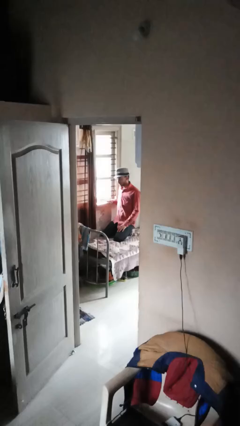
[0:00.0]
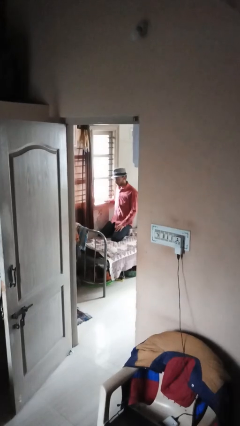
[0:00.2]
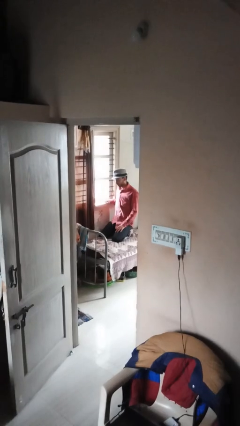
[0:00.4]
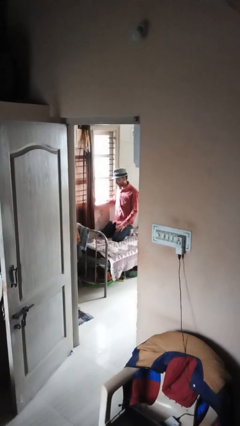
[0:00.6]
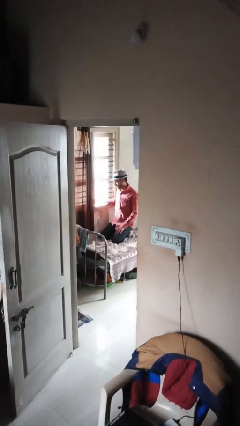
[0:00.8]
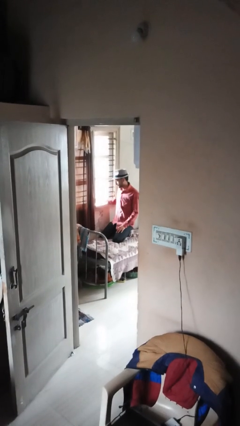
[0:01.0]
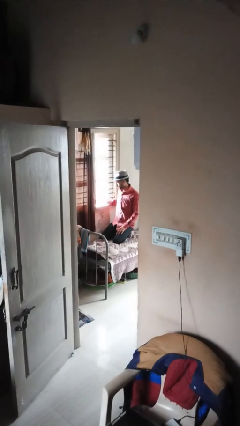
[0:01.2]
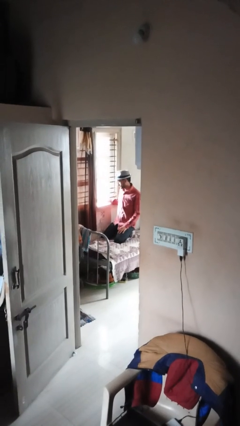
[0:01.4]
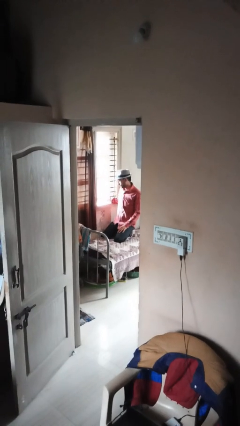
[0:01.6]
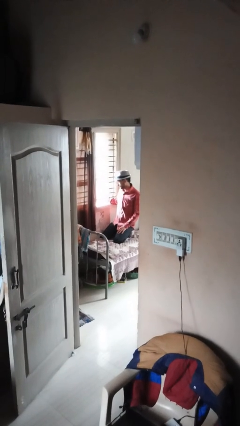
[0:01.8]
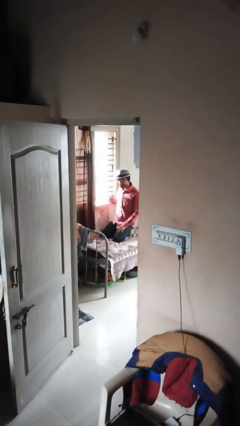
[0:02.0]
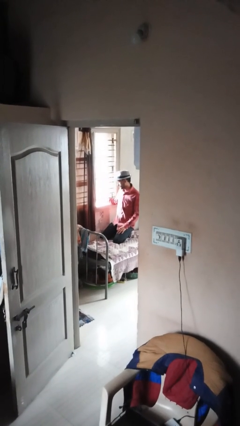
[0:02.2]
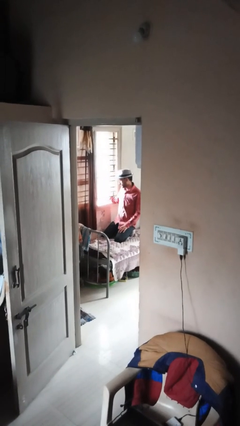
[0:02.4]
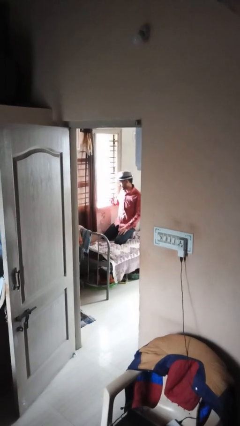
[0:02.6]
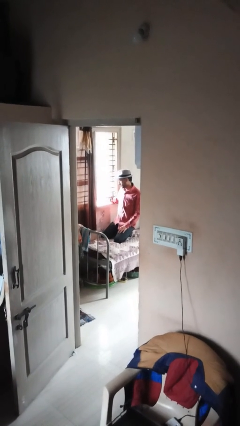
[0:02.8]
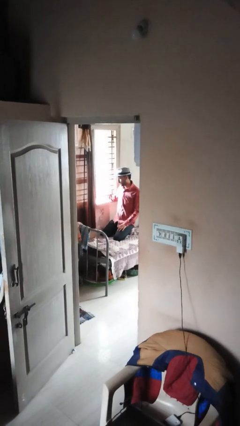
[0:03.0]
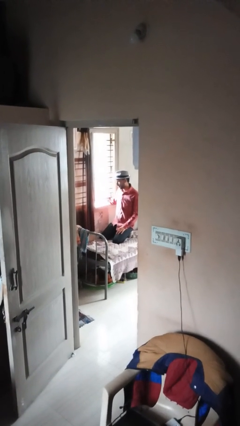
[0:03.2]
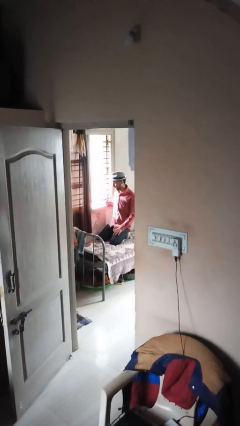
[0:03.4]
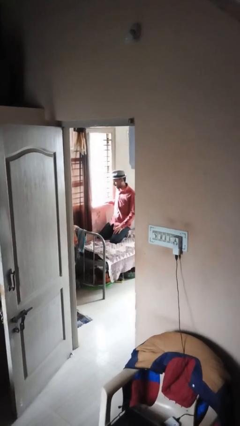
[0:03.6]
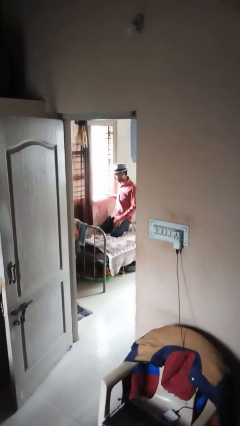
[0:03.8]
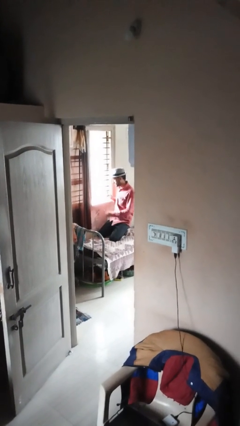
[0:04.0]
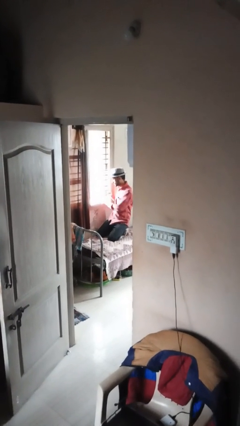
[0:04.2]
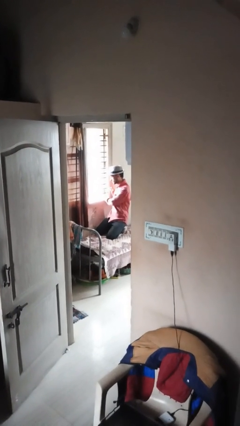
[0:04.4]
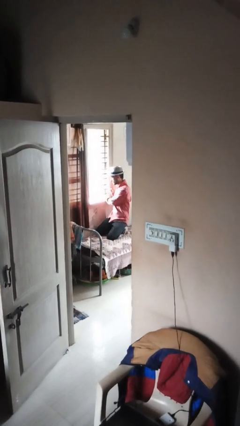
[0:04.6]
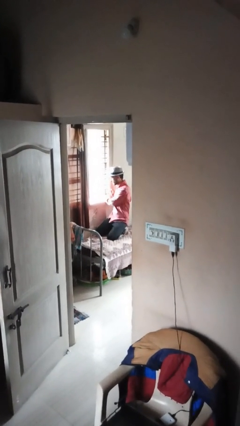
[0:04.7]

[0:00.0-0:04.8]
person opens home window

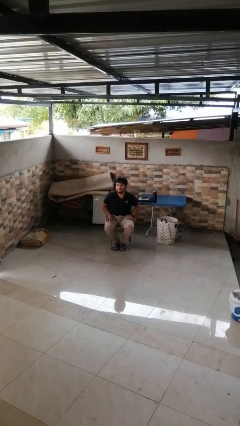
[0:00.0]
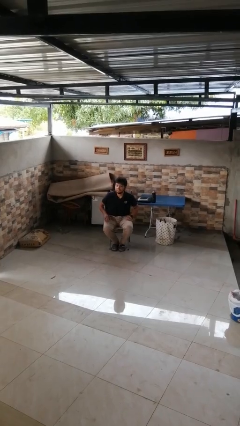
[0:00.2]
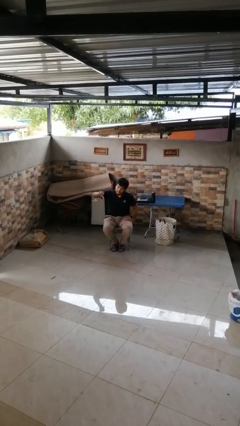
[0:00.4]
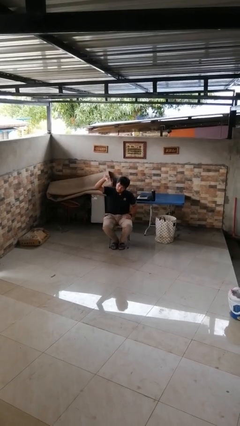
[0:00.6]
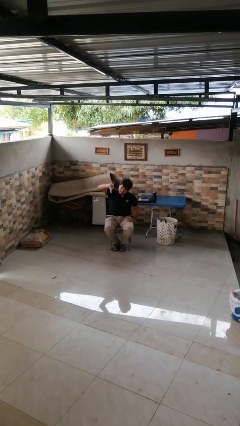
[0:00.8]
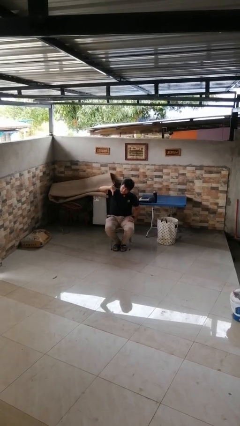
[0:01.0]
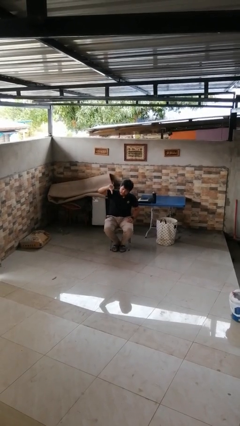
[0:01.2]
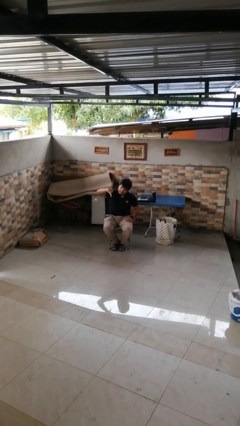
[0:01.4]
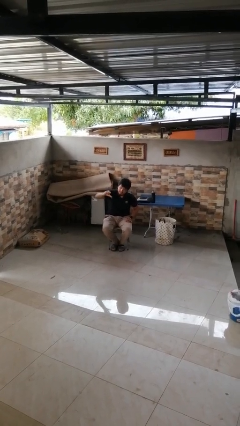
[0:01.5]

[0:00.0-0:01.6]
person gestures thumbs down

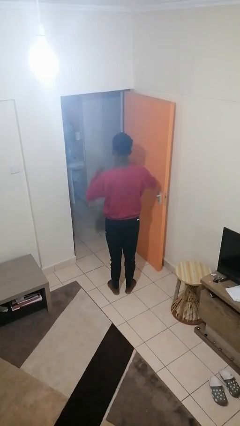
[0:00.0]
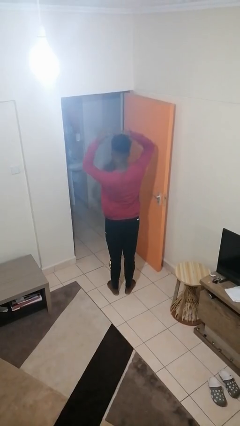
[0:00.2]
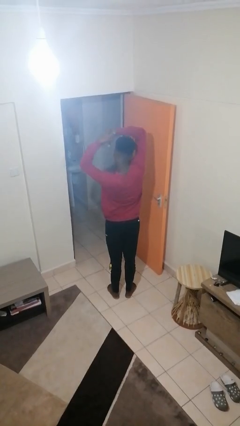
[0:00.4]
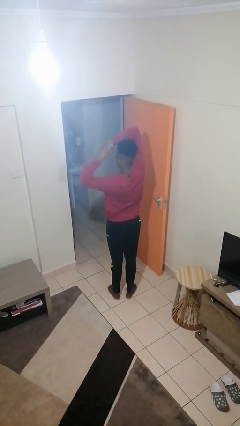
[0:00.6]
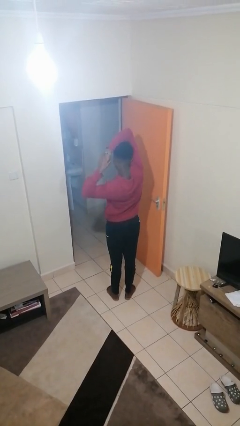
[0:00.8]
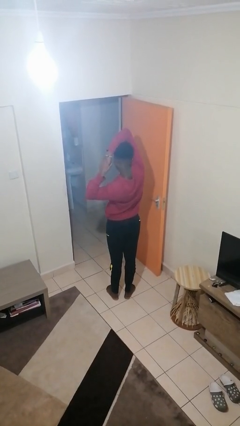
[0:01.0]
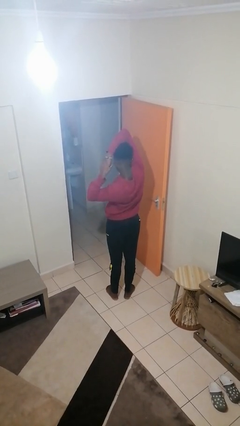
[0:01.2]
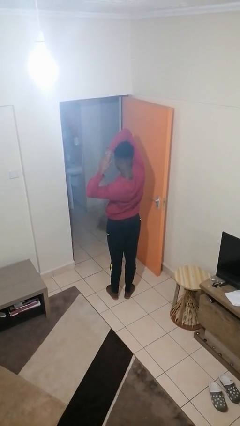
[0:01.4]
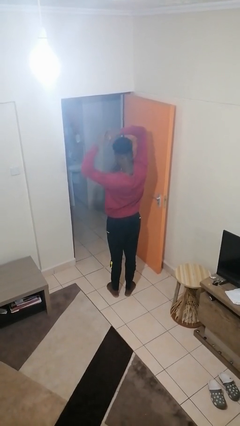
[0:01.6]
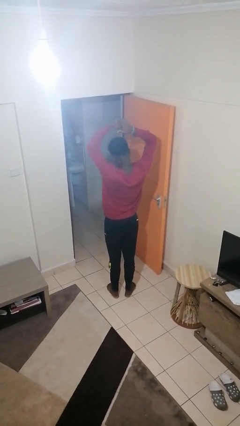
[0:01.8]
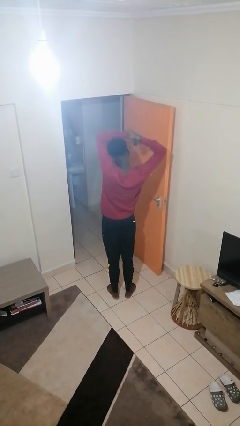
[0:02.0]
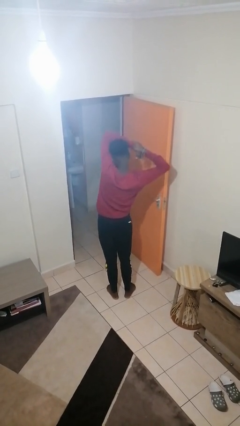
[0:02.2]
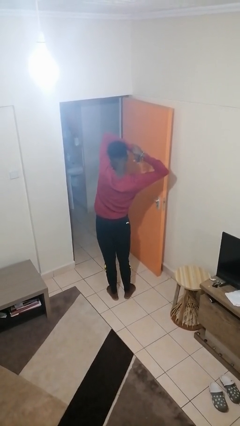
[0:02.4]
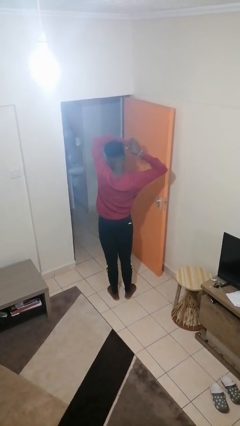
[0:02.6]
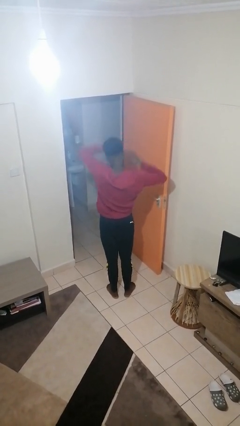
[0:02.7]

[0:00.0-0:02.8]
person stretches arms over head

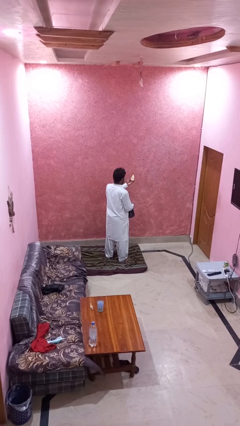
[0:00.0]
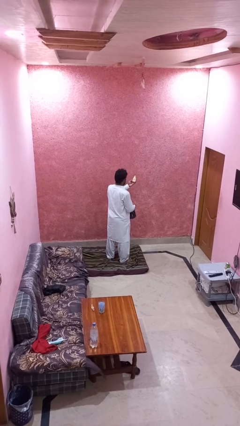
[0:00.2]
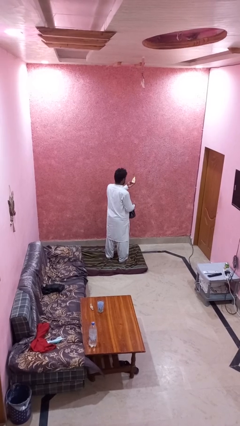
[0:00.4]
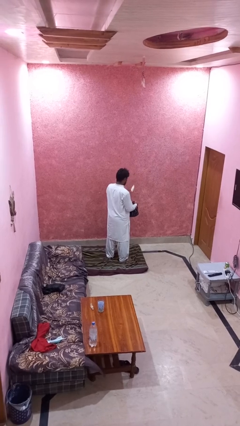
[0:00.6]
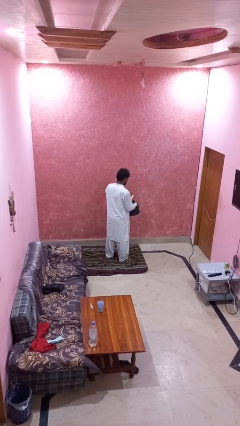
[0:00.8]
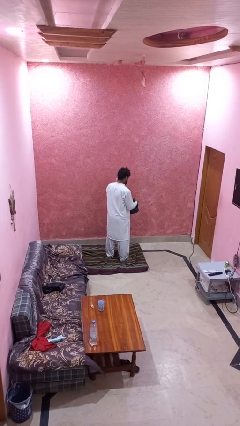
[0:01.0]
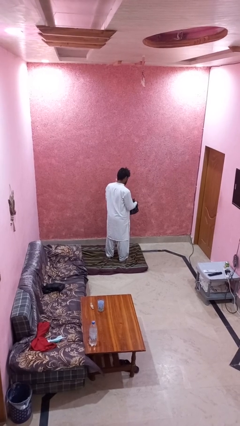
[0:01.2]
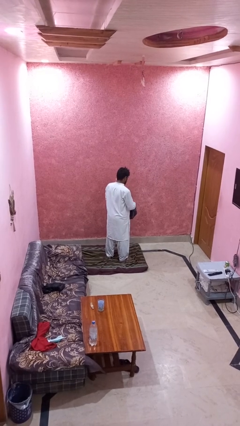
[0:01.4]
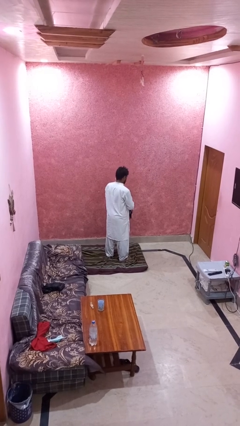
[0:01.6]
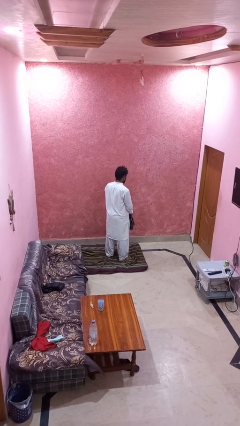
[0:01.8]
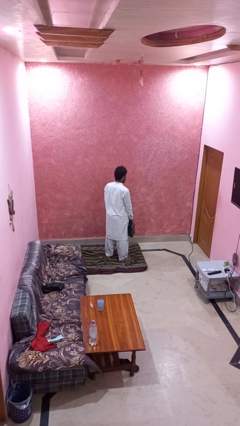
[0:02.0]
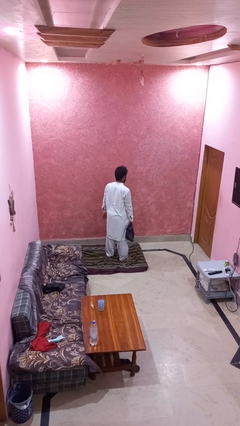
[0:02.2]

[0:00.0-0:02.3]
person puts object into purse

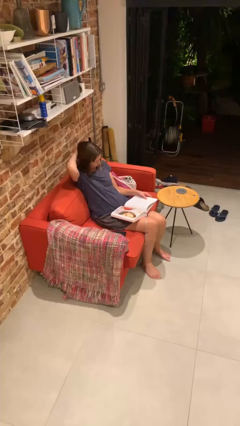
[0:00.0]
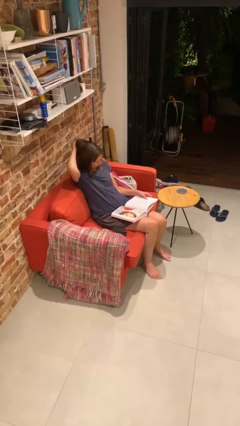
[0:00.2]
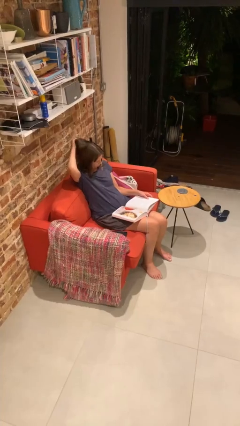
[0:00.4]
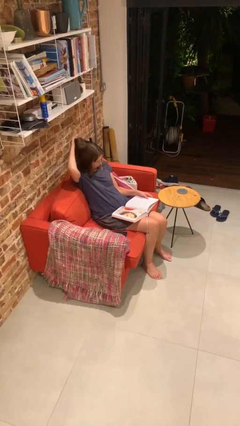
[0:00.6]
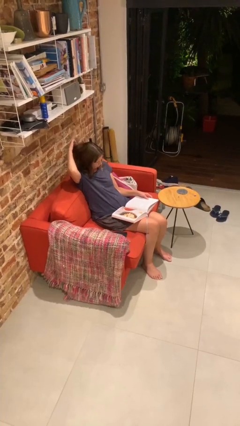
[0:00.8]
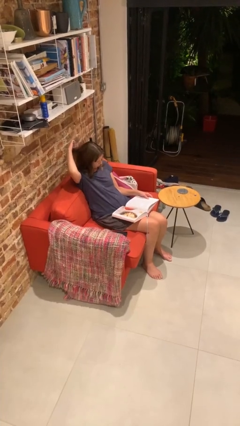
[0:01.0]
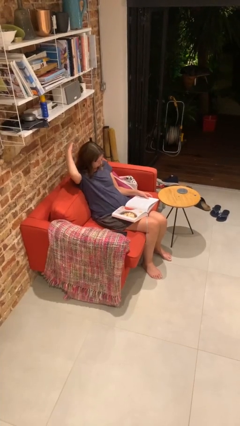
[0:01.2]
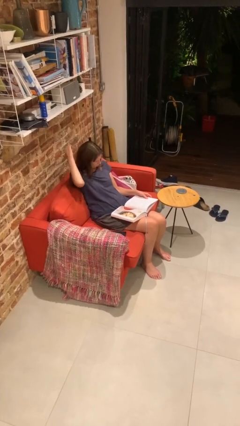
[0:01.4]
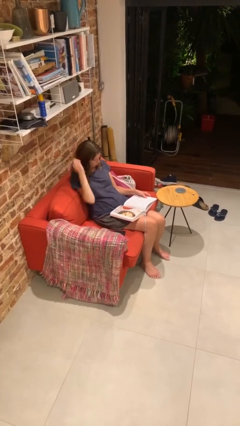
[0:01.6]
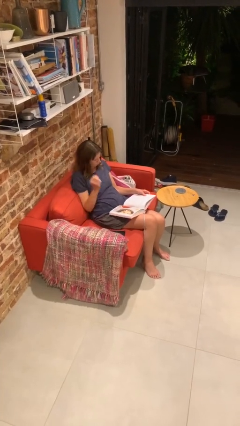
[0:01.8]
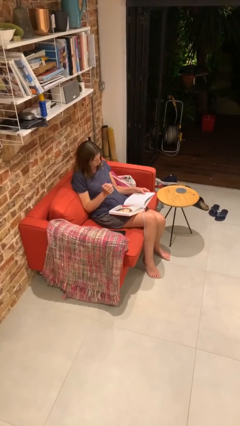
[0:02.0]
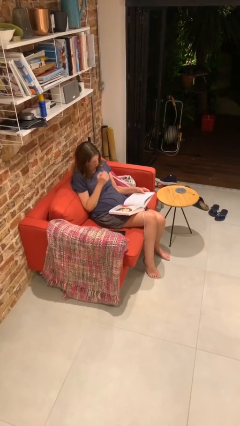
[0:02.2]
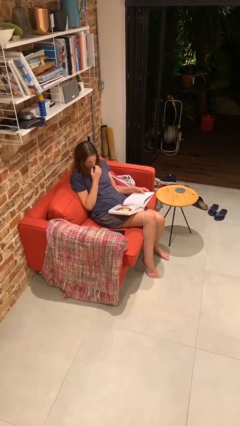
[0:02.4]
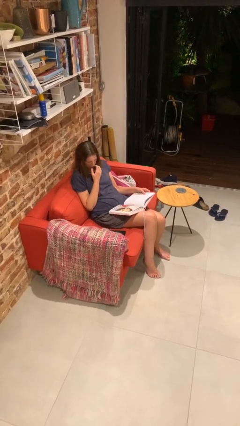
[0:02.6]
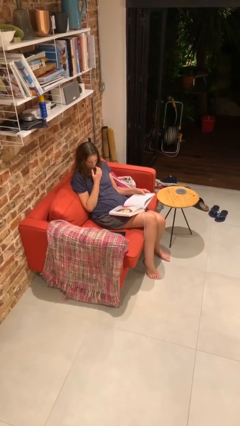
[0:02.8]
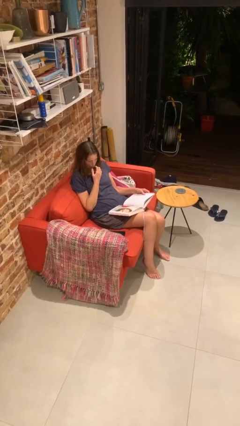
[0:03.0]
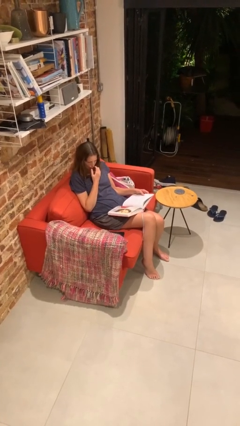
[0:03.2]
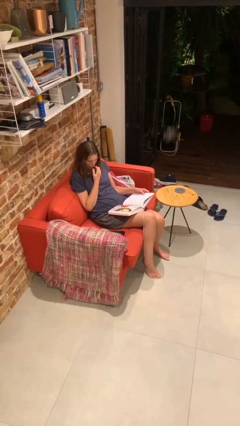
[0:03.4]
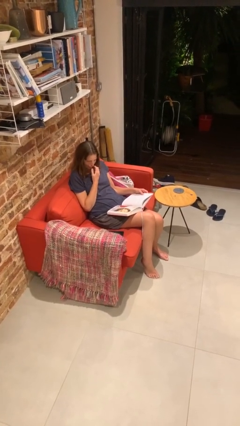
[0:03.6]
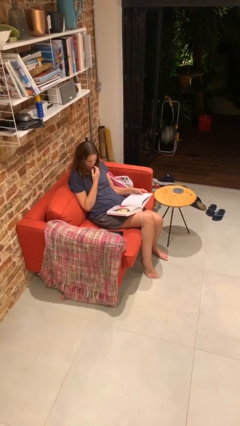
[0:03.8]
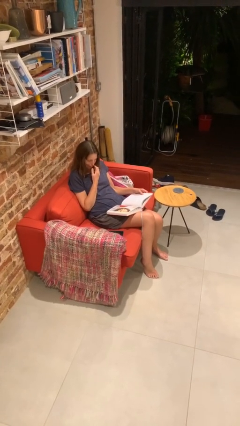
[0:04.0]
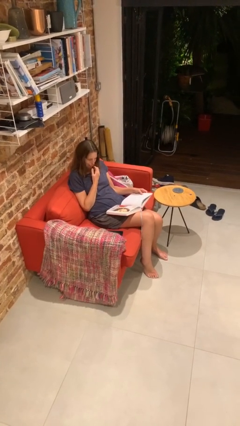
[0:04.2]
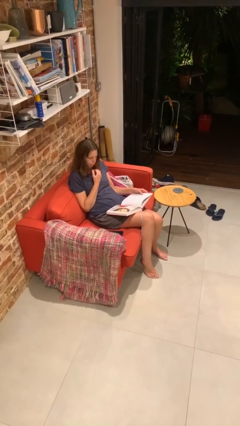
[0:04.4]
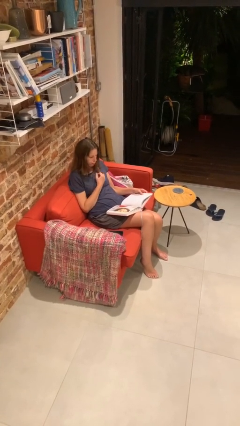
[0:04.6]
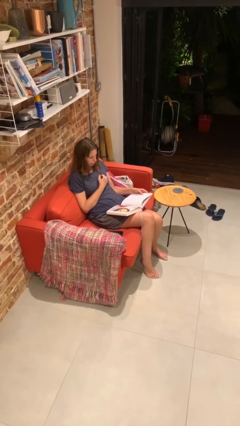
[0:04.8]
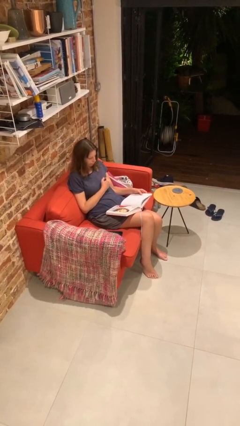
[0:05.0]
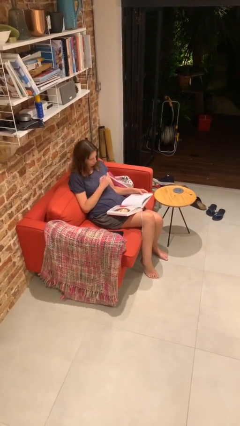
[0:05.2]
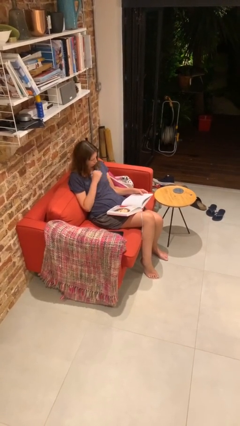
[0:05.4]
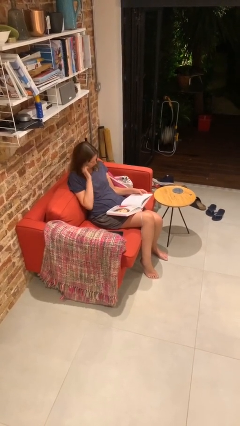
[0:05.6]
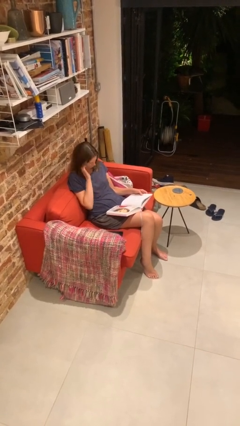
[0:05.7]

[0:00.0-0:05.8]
person reads document

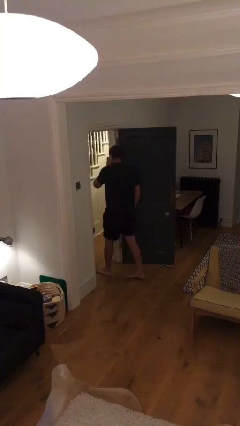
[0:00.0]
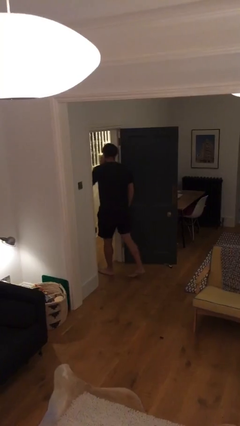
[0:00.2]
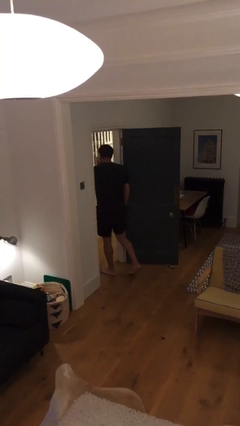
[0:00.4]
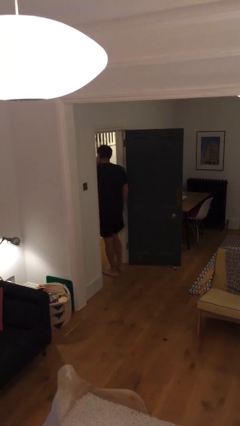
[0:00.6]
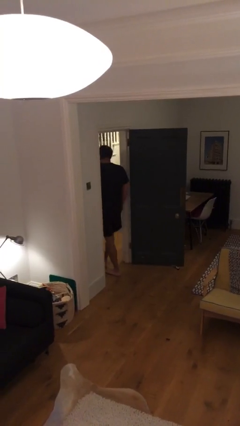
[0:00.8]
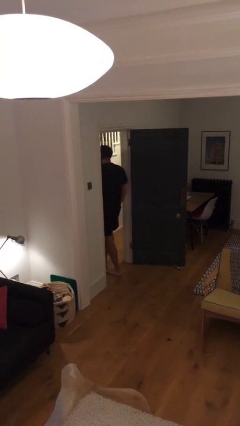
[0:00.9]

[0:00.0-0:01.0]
person exits scene through structure
